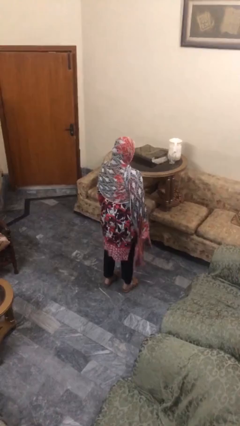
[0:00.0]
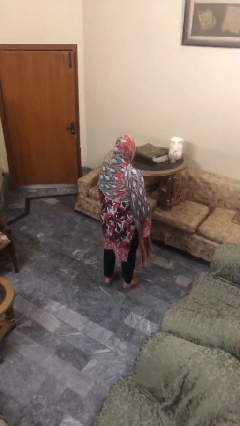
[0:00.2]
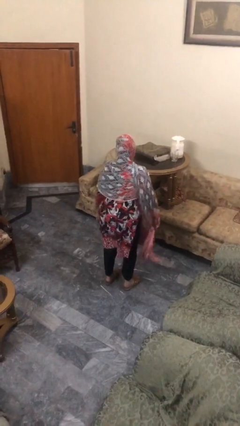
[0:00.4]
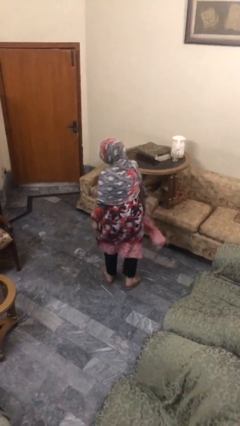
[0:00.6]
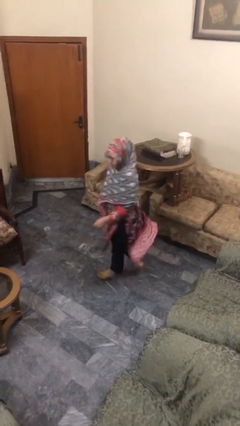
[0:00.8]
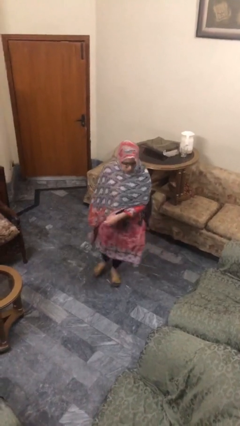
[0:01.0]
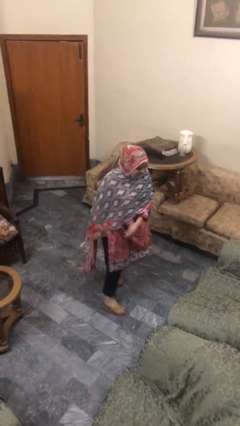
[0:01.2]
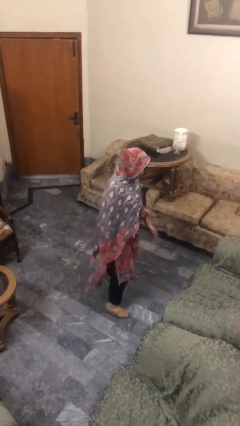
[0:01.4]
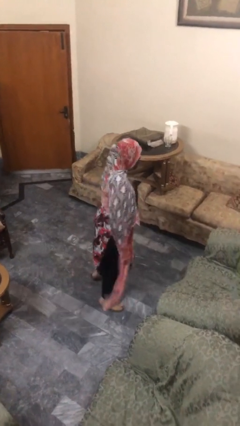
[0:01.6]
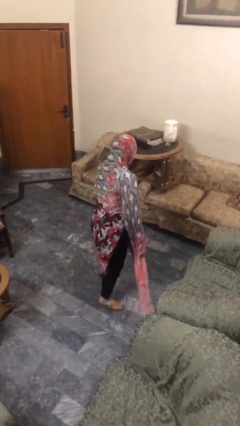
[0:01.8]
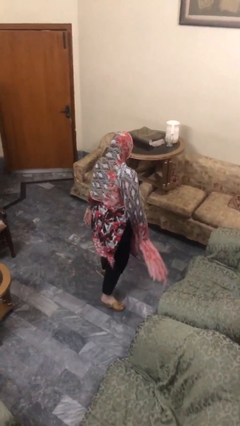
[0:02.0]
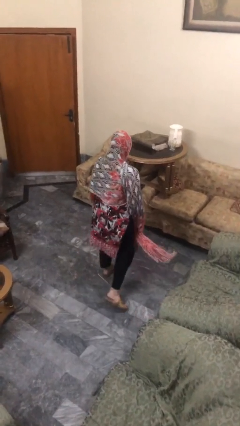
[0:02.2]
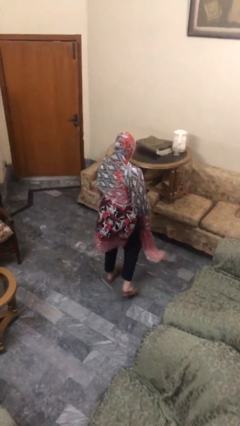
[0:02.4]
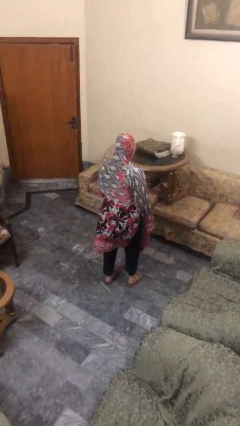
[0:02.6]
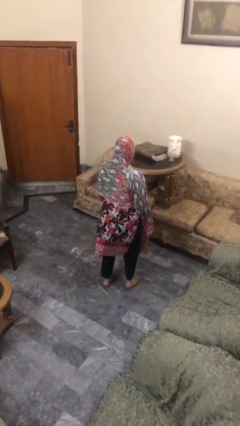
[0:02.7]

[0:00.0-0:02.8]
person twirls

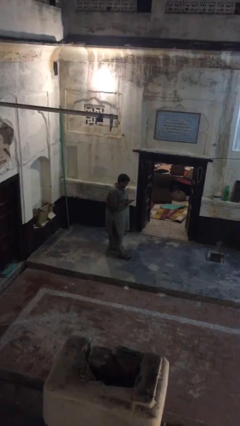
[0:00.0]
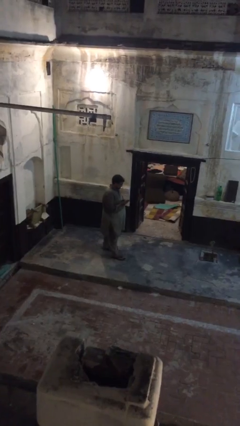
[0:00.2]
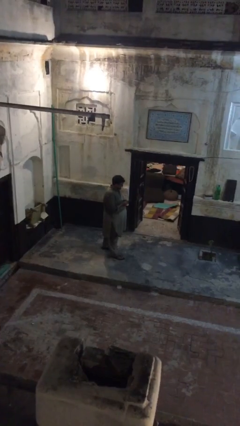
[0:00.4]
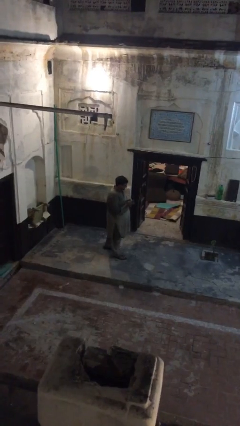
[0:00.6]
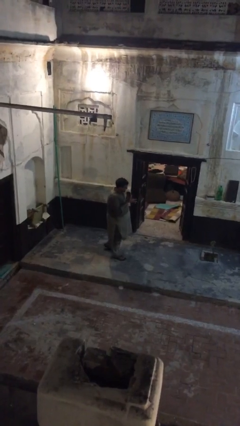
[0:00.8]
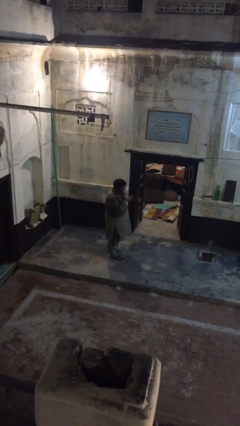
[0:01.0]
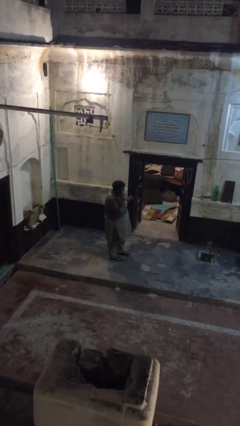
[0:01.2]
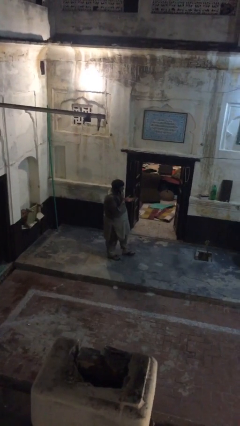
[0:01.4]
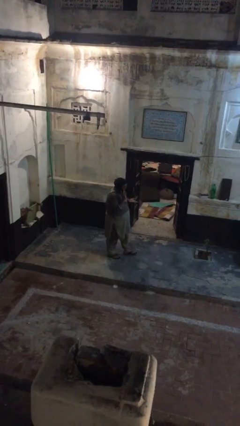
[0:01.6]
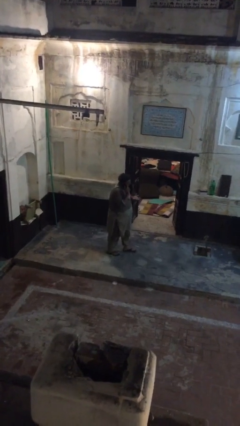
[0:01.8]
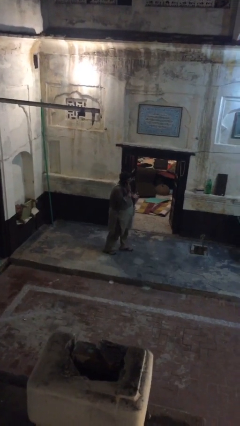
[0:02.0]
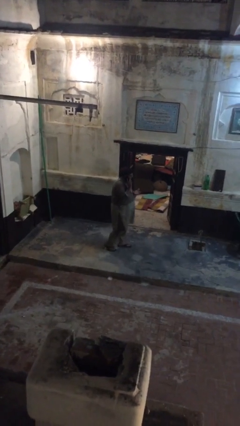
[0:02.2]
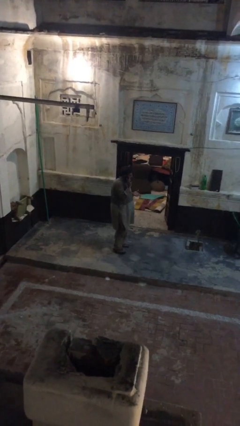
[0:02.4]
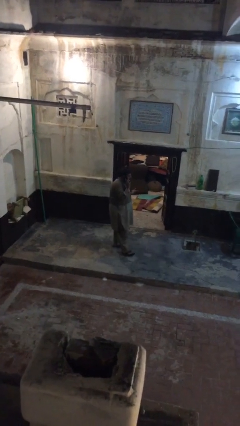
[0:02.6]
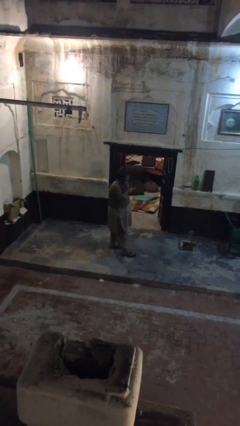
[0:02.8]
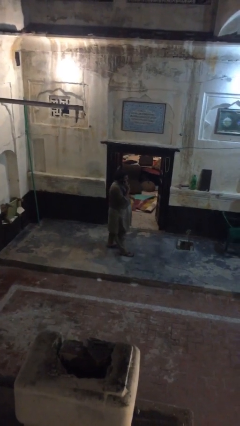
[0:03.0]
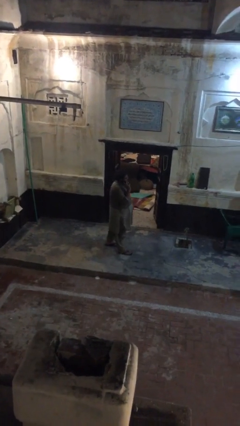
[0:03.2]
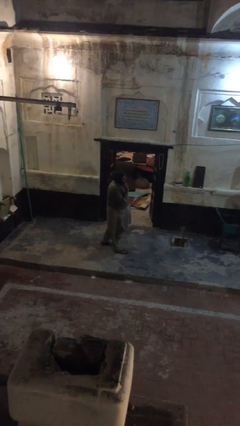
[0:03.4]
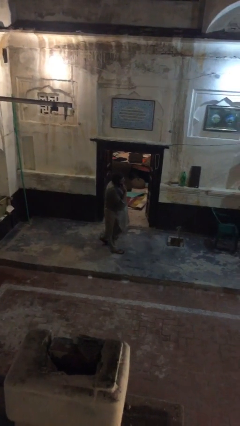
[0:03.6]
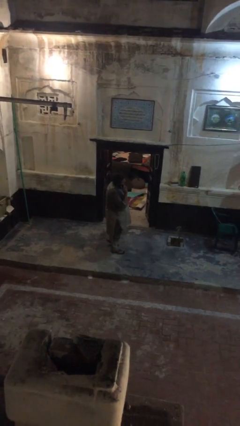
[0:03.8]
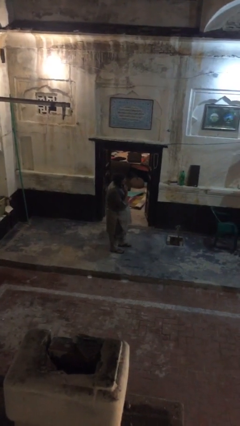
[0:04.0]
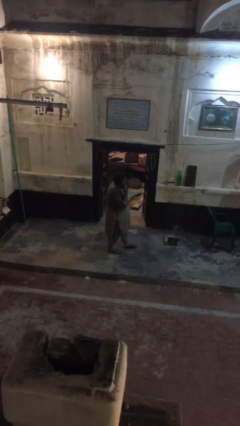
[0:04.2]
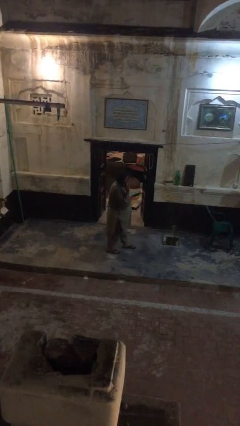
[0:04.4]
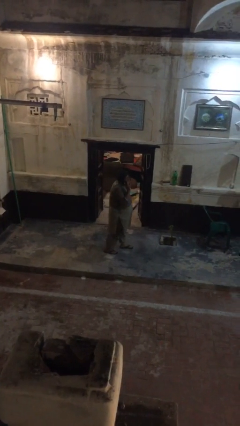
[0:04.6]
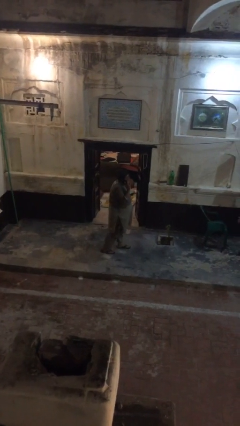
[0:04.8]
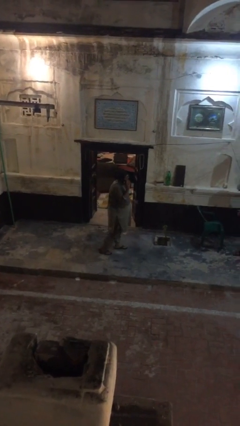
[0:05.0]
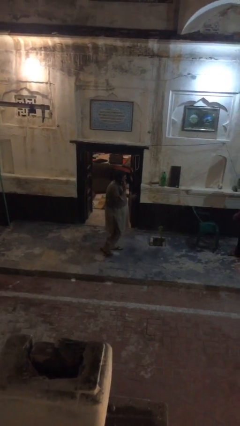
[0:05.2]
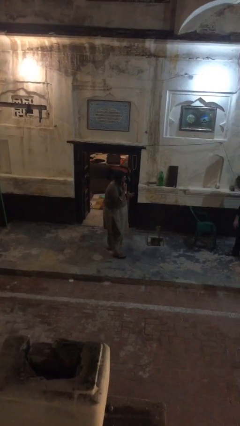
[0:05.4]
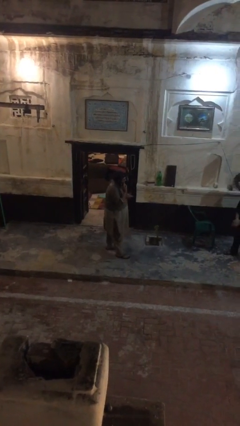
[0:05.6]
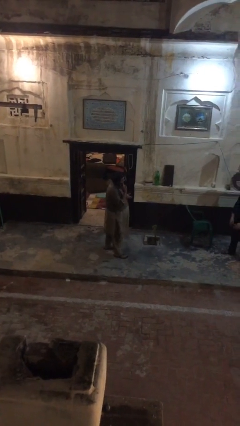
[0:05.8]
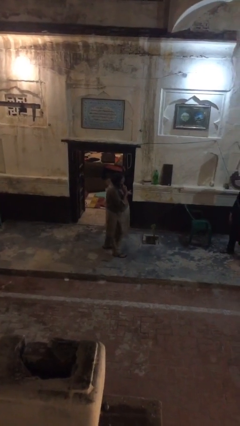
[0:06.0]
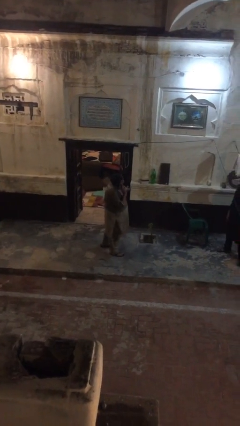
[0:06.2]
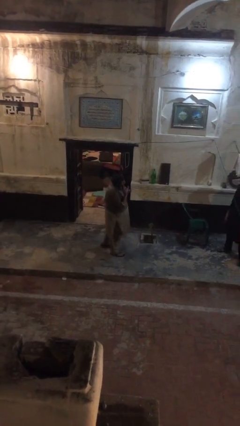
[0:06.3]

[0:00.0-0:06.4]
person talks on phone

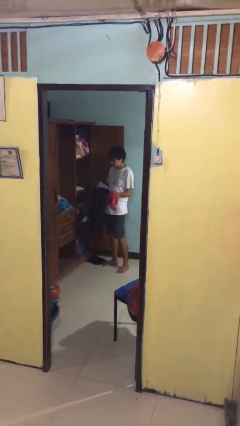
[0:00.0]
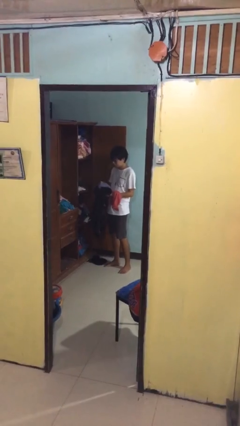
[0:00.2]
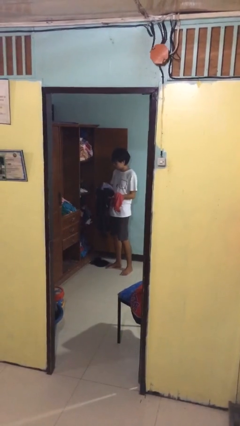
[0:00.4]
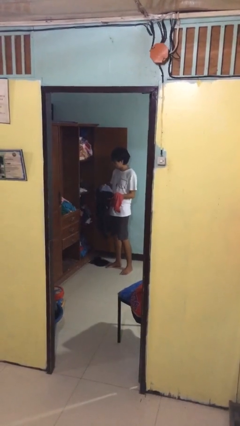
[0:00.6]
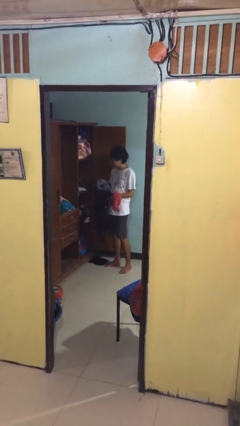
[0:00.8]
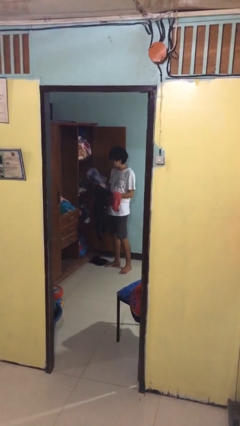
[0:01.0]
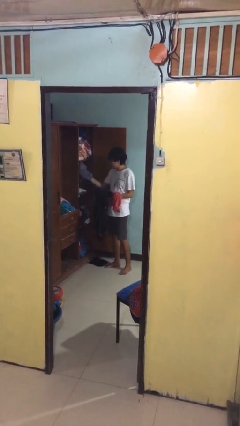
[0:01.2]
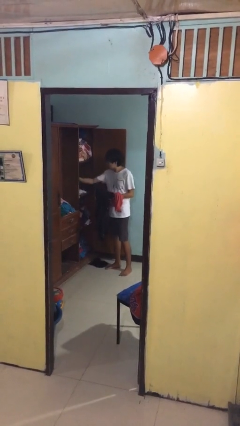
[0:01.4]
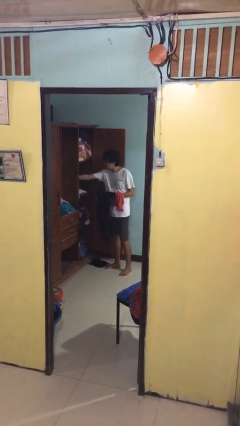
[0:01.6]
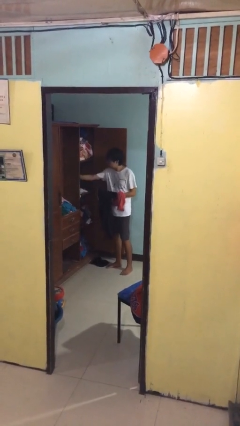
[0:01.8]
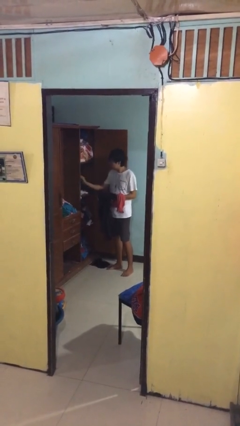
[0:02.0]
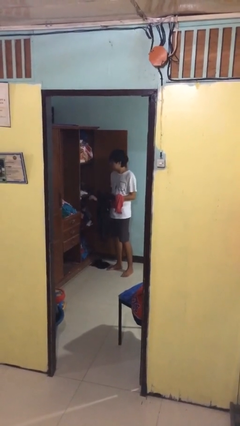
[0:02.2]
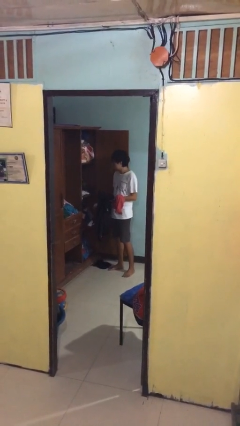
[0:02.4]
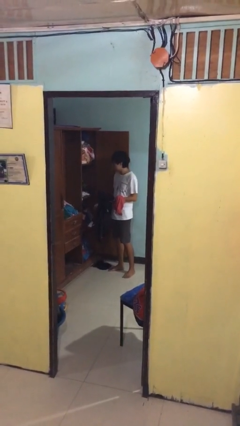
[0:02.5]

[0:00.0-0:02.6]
person puts clothes into dresser

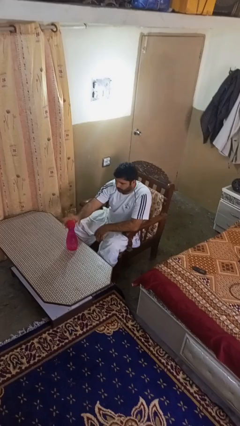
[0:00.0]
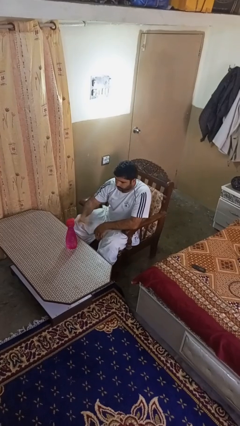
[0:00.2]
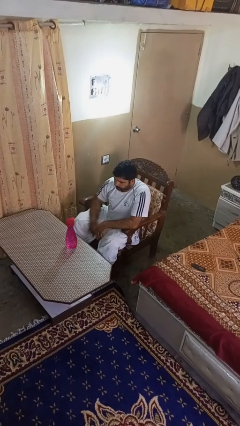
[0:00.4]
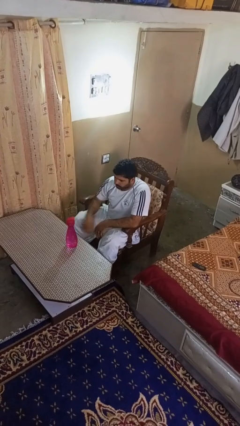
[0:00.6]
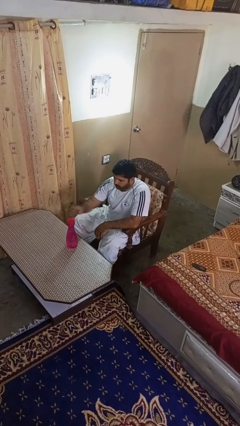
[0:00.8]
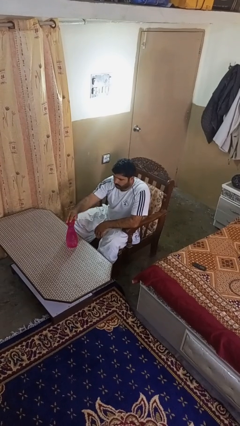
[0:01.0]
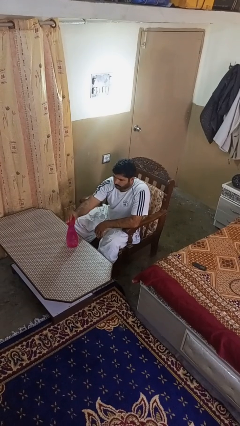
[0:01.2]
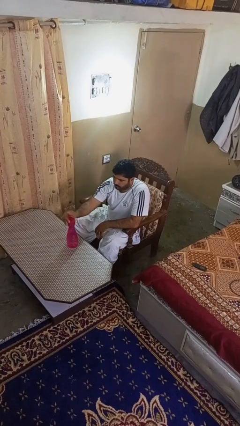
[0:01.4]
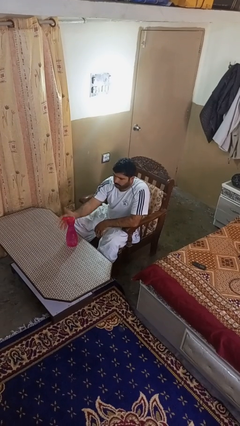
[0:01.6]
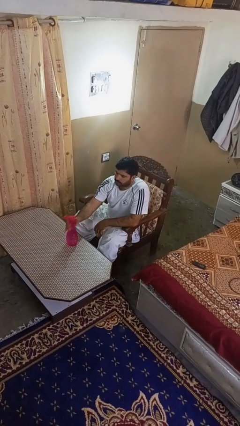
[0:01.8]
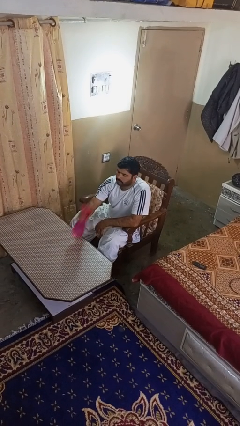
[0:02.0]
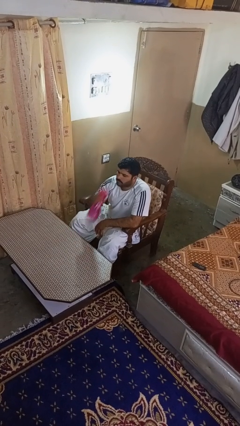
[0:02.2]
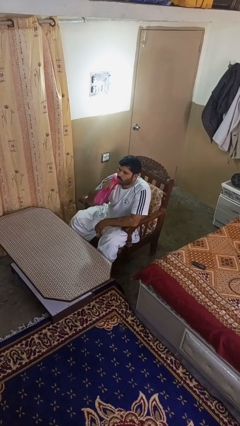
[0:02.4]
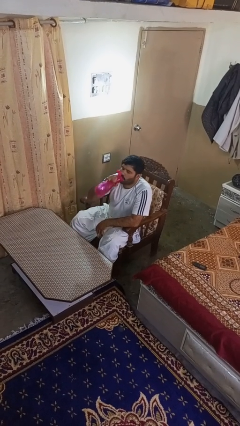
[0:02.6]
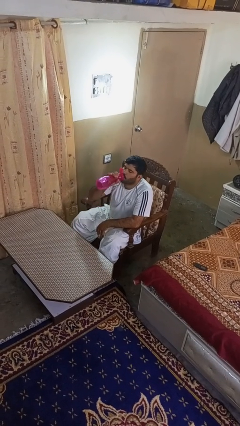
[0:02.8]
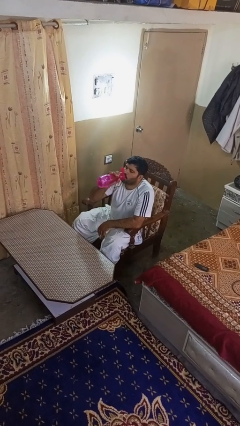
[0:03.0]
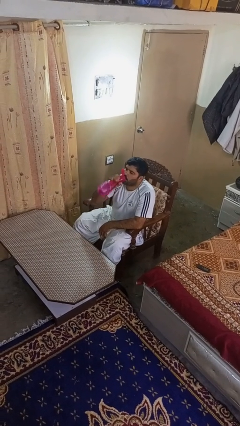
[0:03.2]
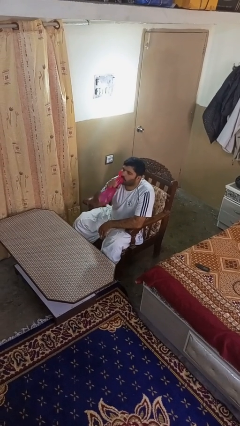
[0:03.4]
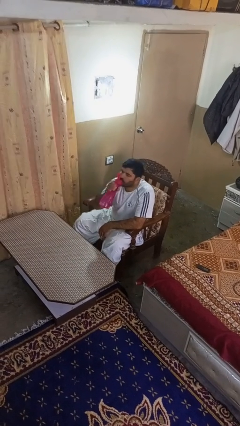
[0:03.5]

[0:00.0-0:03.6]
person drinks from bottle

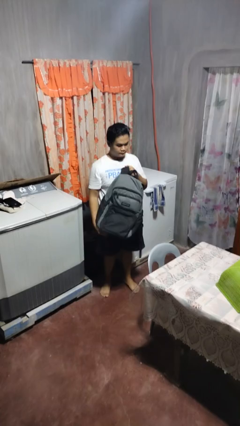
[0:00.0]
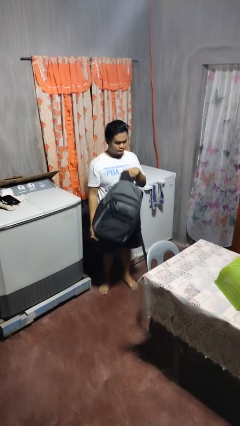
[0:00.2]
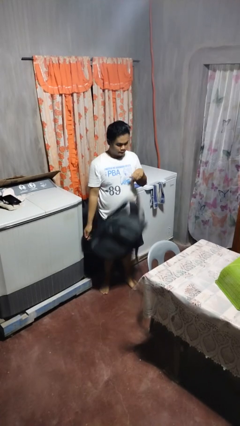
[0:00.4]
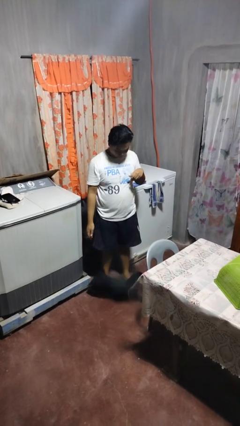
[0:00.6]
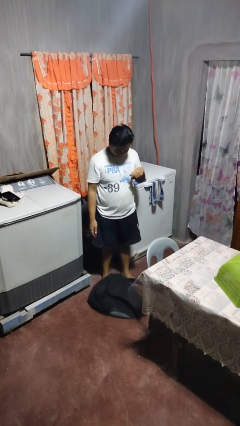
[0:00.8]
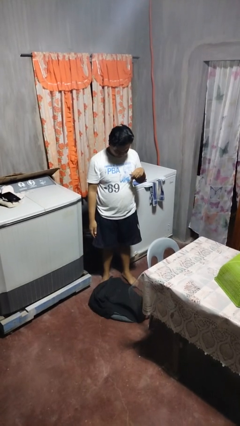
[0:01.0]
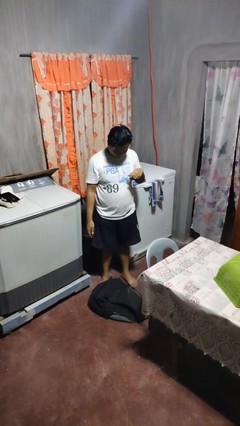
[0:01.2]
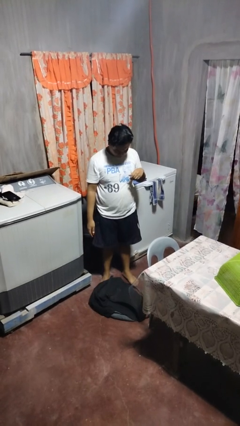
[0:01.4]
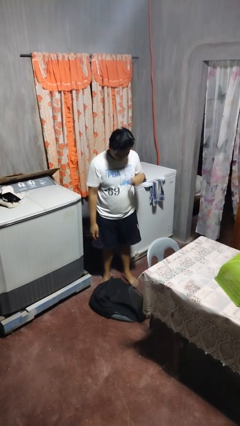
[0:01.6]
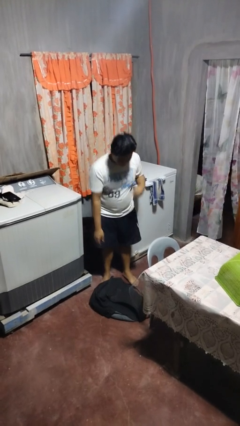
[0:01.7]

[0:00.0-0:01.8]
person drops object
